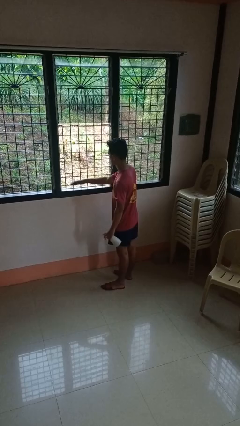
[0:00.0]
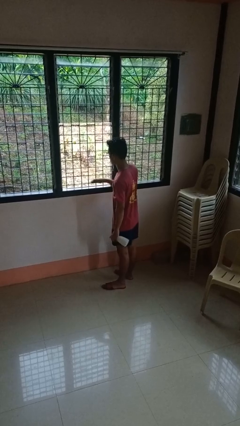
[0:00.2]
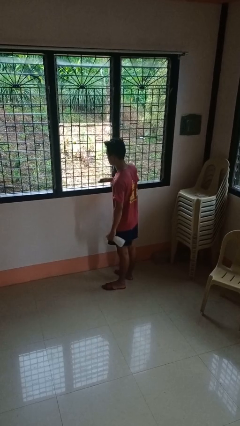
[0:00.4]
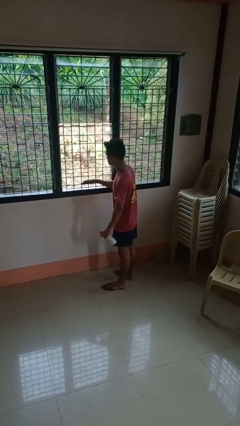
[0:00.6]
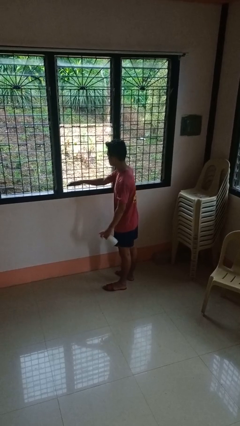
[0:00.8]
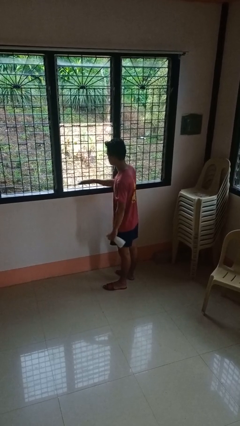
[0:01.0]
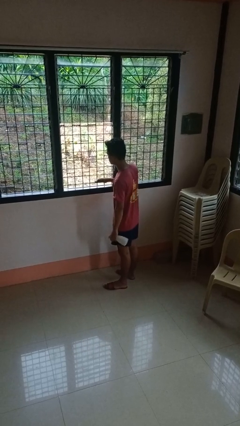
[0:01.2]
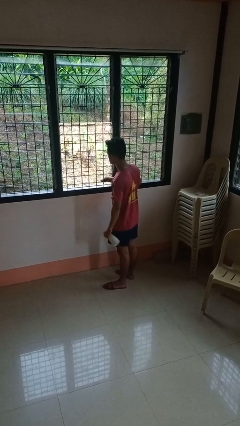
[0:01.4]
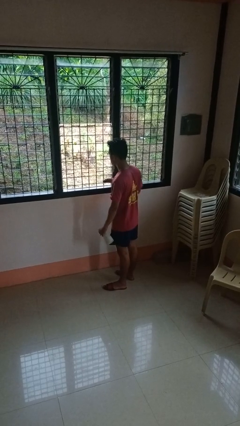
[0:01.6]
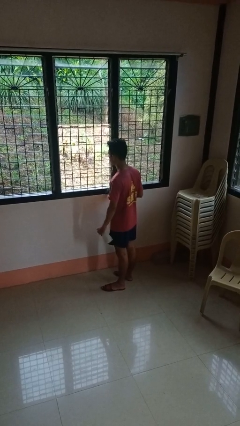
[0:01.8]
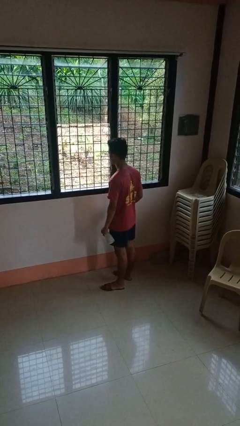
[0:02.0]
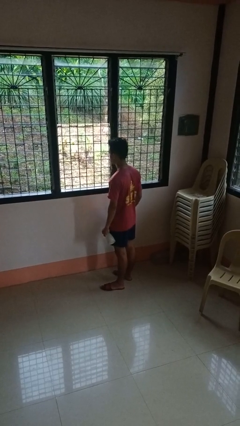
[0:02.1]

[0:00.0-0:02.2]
person washes window

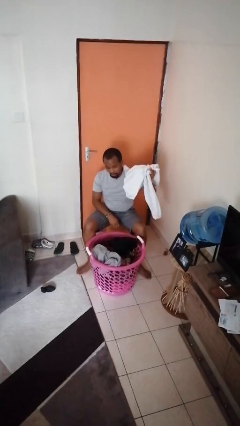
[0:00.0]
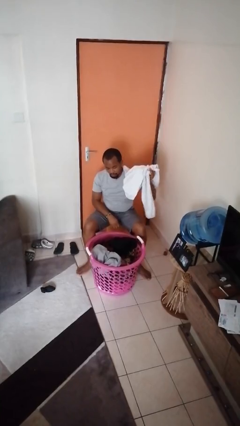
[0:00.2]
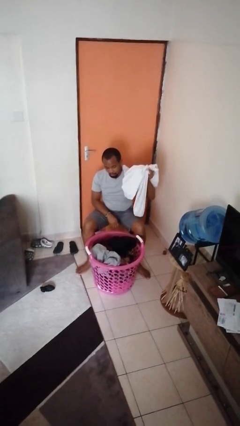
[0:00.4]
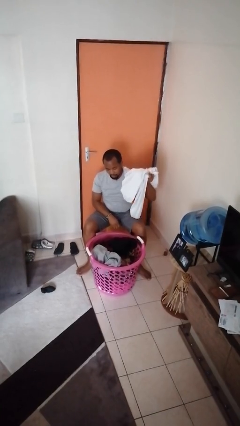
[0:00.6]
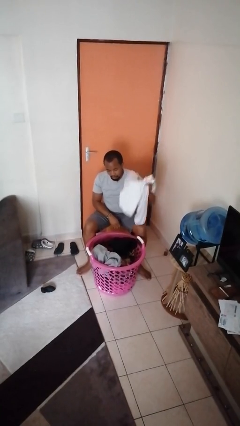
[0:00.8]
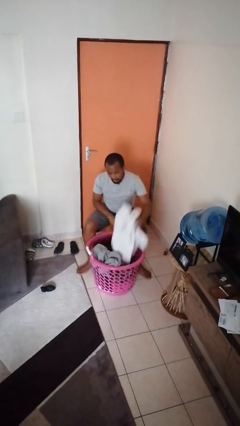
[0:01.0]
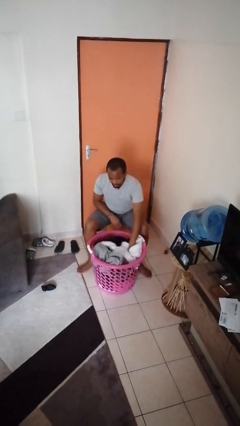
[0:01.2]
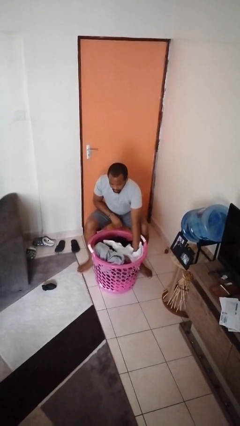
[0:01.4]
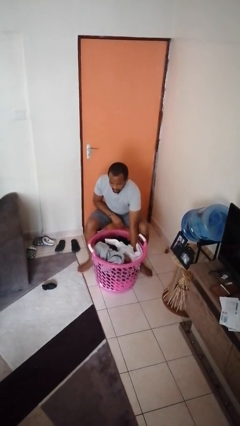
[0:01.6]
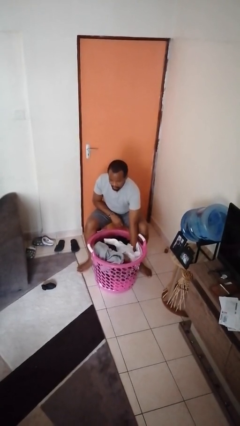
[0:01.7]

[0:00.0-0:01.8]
person puts object into basket

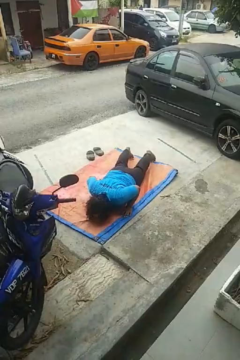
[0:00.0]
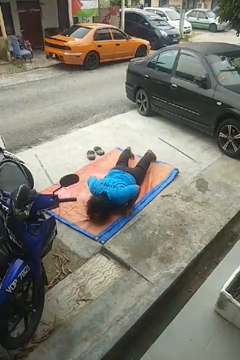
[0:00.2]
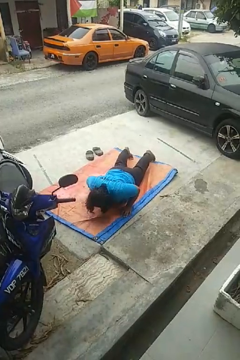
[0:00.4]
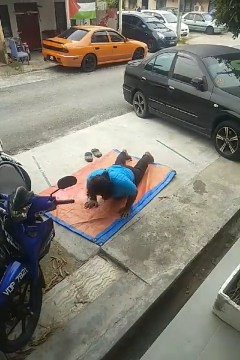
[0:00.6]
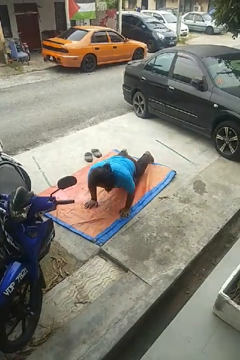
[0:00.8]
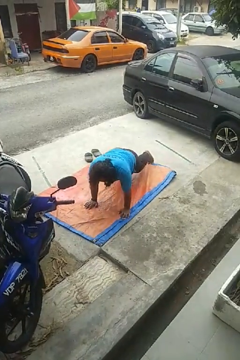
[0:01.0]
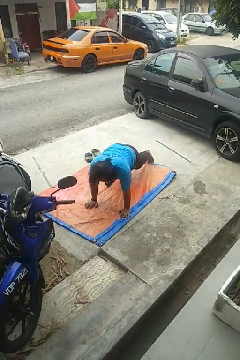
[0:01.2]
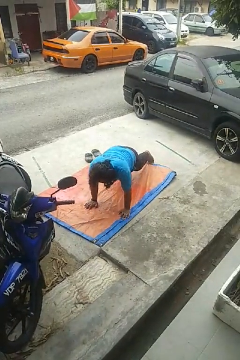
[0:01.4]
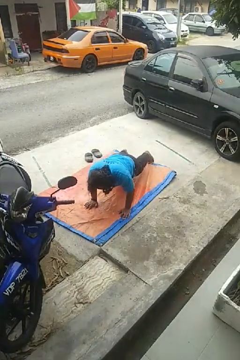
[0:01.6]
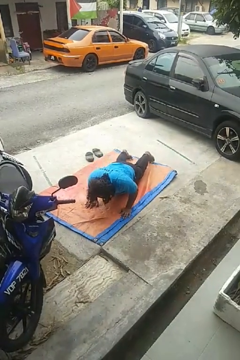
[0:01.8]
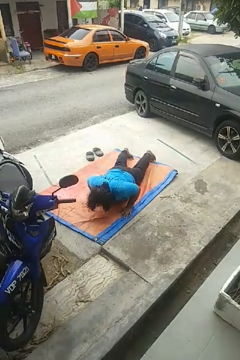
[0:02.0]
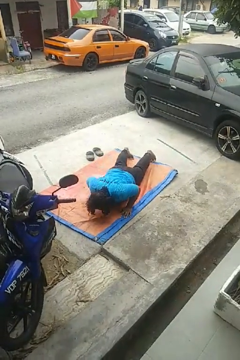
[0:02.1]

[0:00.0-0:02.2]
person exercises with pushup

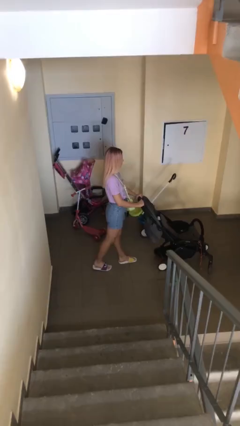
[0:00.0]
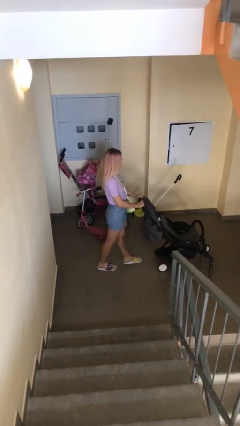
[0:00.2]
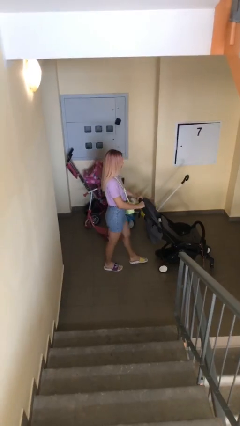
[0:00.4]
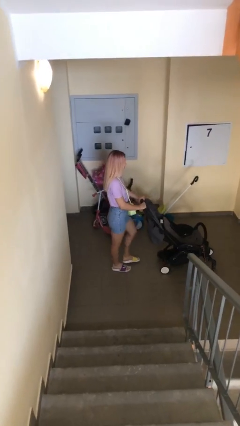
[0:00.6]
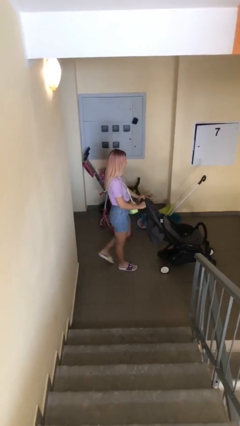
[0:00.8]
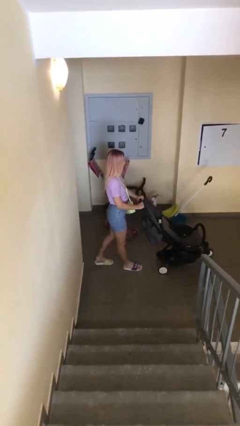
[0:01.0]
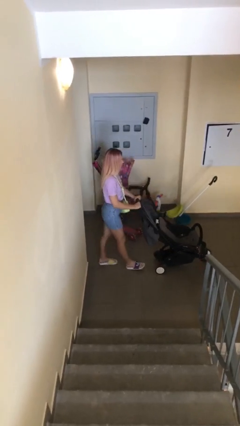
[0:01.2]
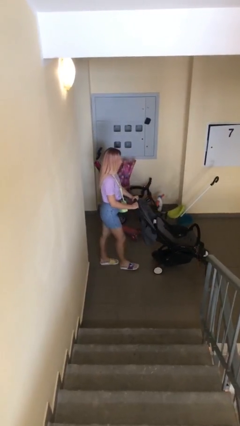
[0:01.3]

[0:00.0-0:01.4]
person pulls wheeled cart

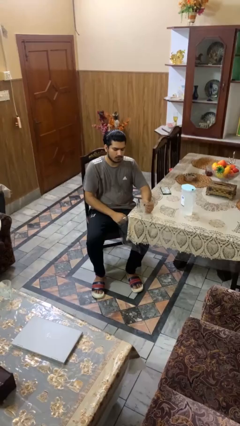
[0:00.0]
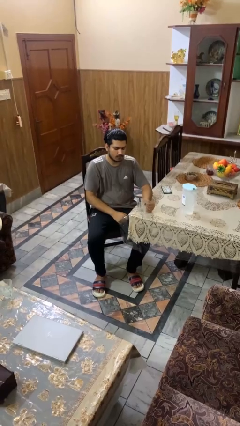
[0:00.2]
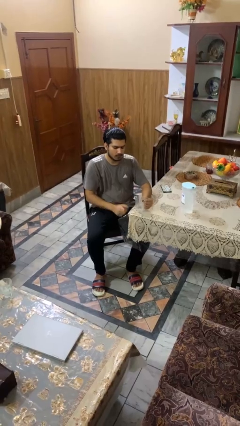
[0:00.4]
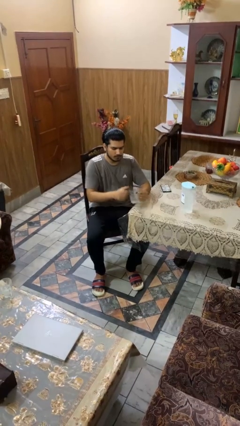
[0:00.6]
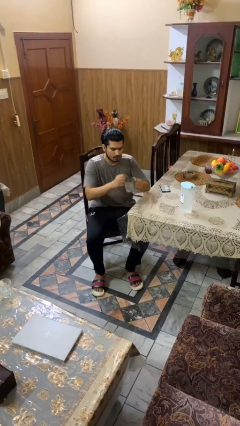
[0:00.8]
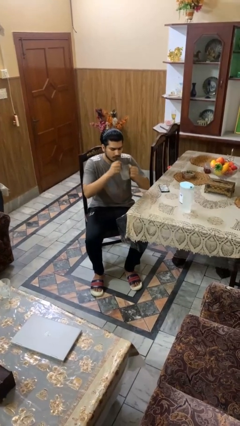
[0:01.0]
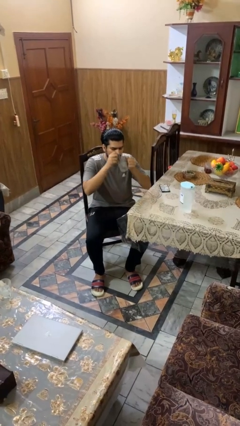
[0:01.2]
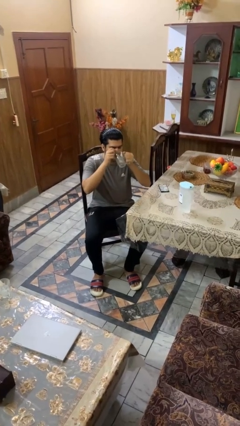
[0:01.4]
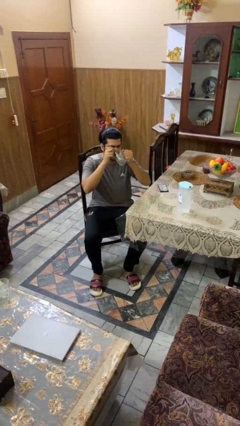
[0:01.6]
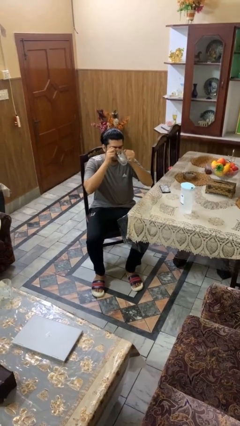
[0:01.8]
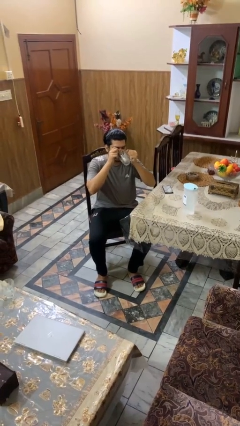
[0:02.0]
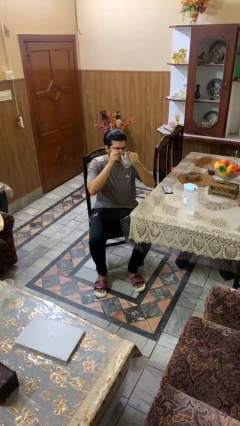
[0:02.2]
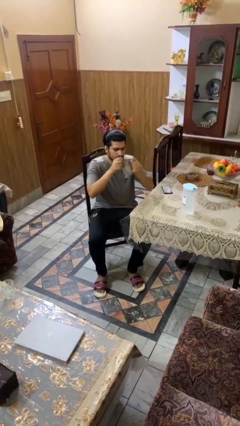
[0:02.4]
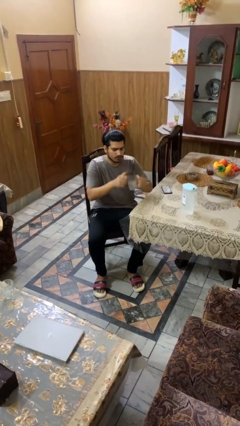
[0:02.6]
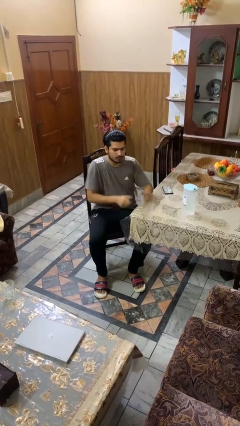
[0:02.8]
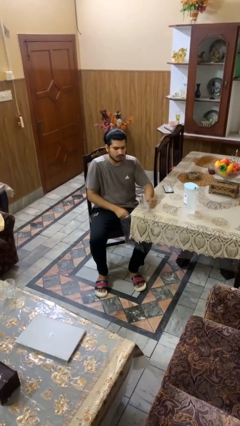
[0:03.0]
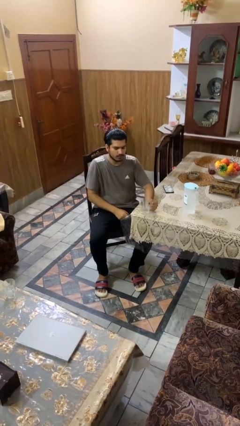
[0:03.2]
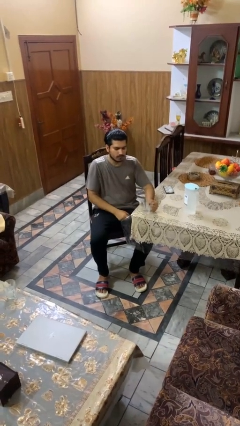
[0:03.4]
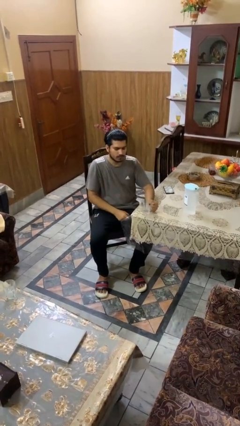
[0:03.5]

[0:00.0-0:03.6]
person drinks from mug

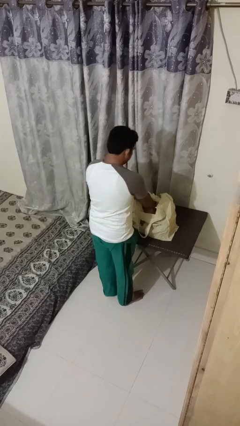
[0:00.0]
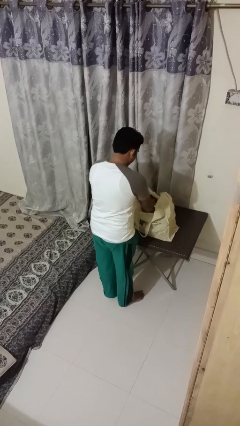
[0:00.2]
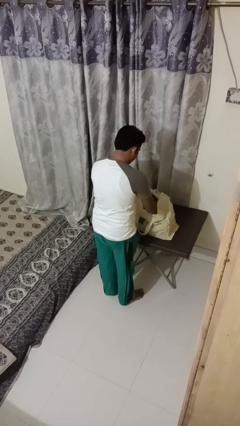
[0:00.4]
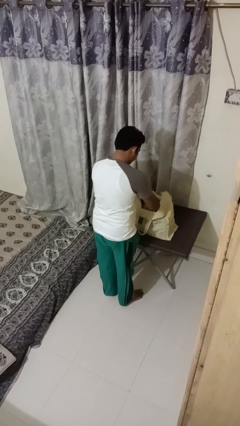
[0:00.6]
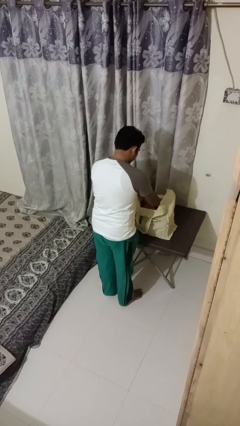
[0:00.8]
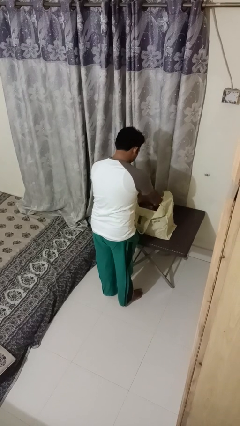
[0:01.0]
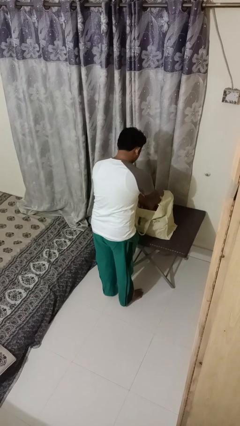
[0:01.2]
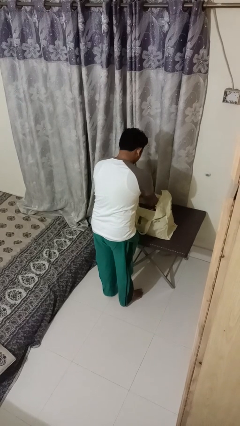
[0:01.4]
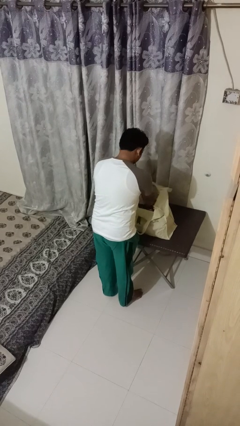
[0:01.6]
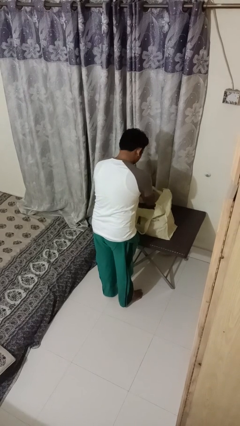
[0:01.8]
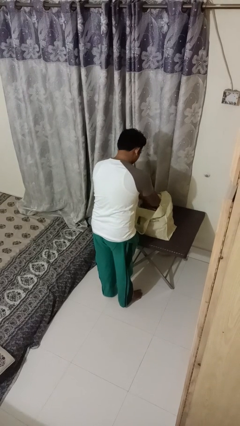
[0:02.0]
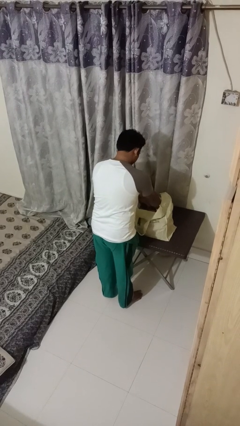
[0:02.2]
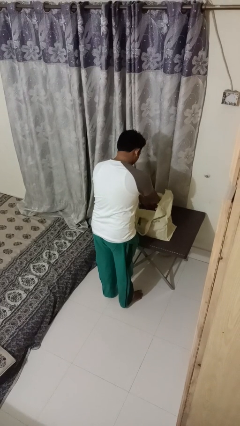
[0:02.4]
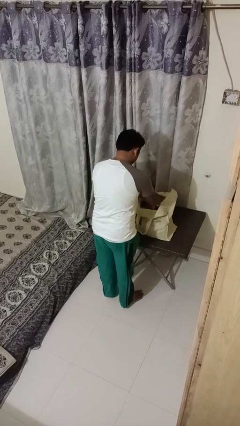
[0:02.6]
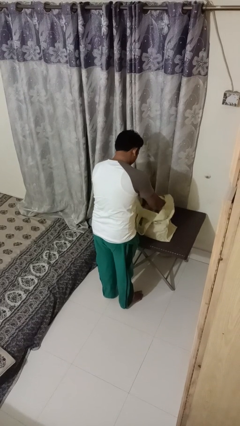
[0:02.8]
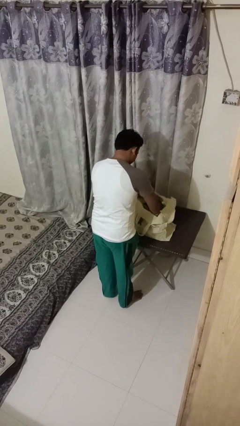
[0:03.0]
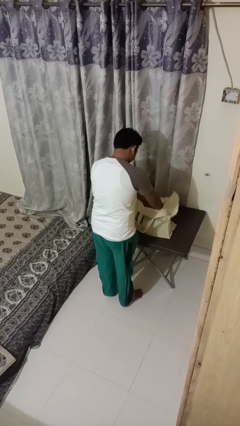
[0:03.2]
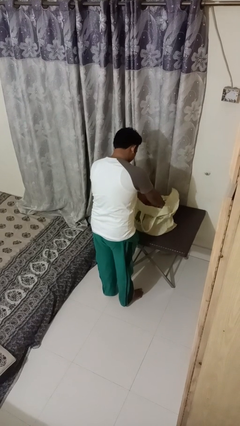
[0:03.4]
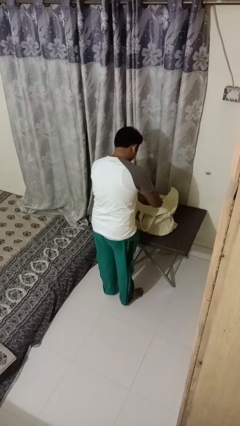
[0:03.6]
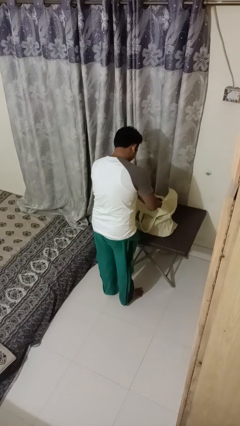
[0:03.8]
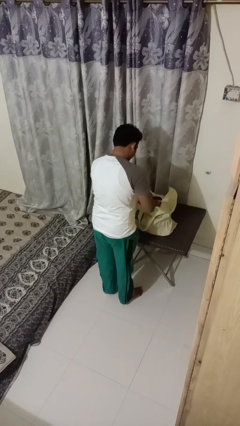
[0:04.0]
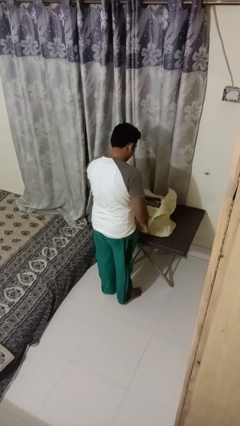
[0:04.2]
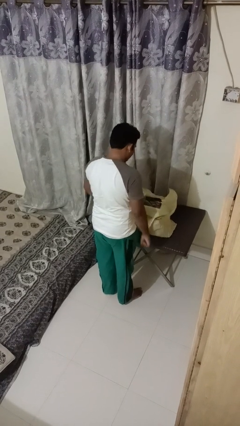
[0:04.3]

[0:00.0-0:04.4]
person searches in bag

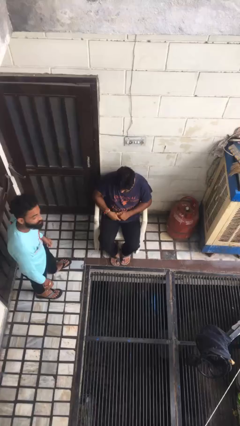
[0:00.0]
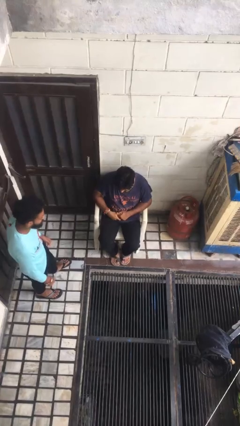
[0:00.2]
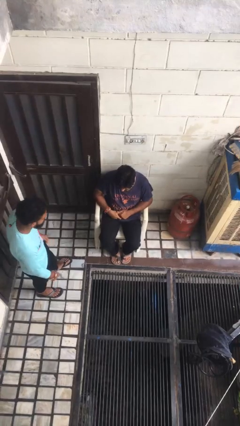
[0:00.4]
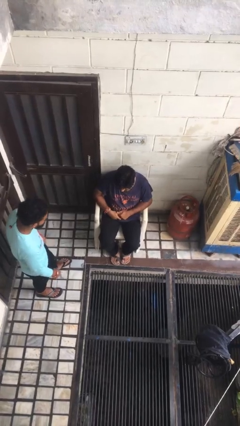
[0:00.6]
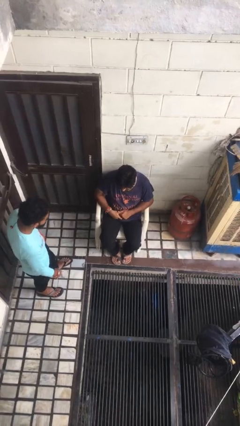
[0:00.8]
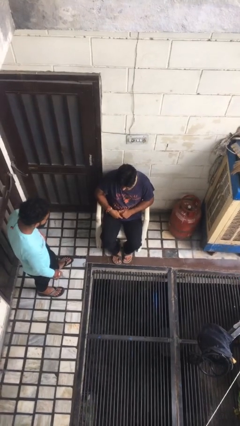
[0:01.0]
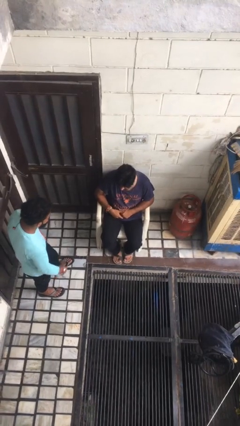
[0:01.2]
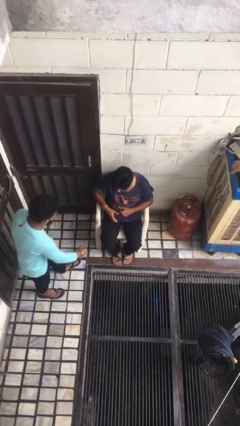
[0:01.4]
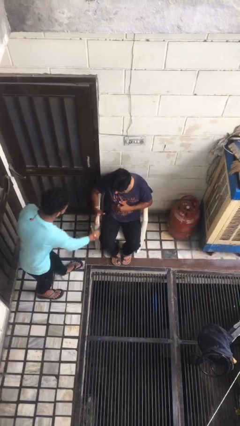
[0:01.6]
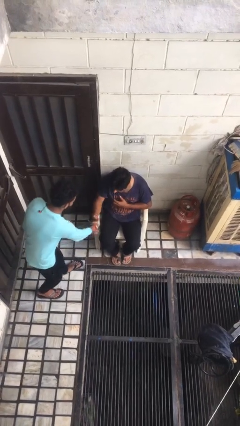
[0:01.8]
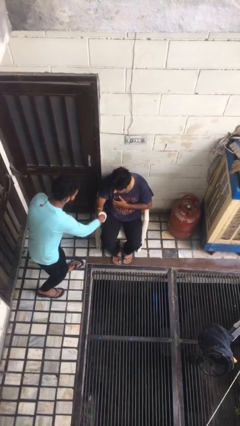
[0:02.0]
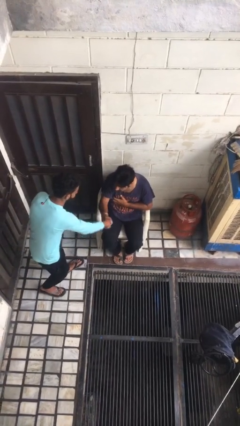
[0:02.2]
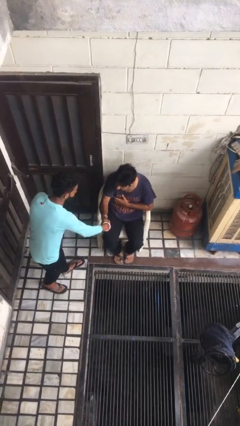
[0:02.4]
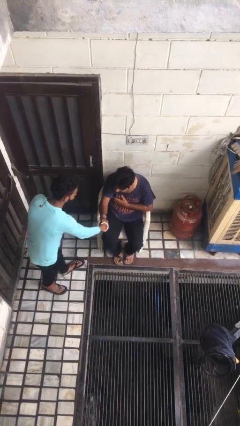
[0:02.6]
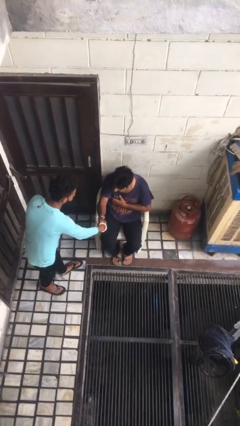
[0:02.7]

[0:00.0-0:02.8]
person shakes hand
